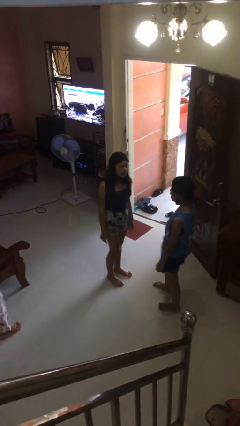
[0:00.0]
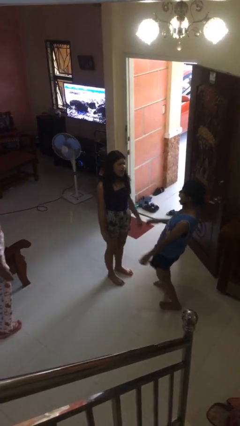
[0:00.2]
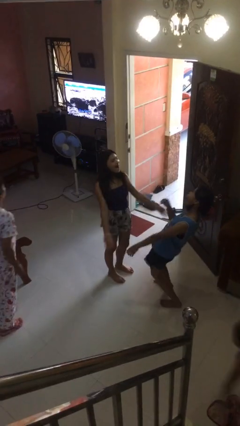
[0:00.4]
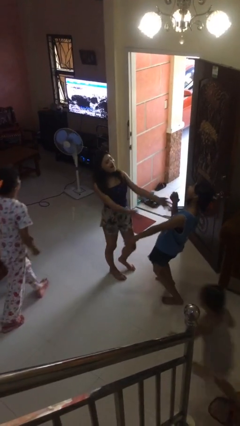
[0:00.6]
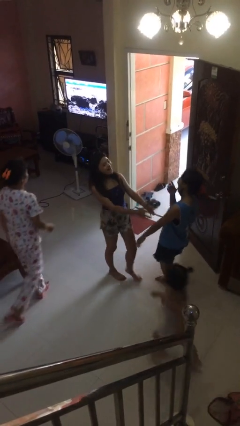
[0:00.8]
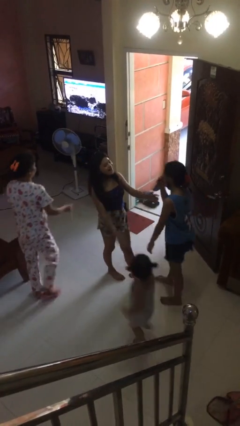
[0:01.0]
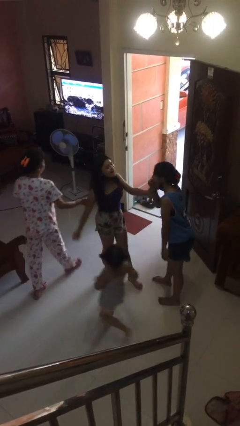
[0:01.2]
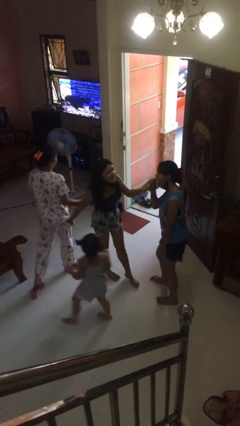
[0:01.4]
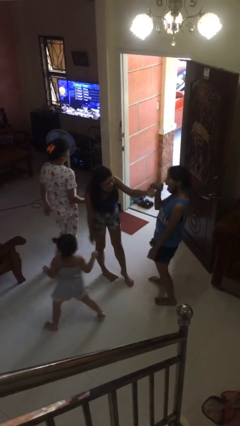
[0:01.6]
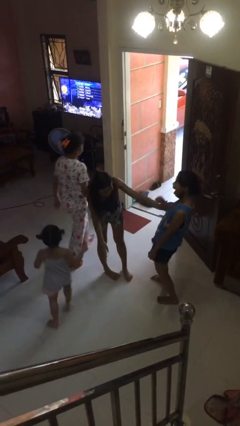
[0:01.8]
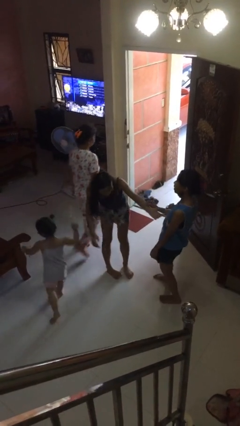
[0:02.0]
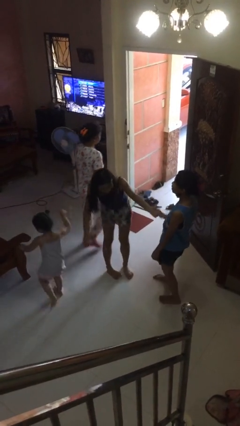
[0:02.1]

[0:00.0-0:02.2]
person laughs with person

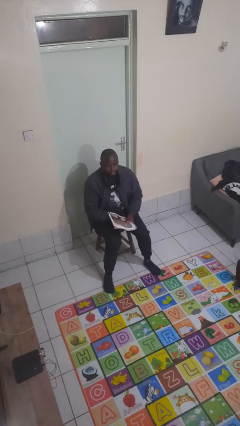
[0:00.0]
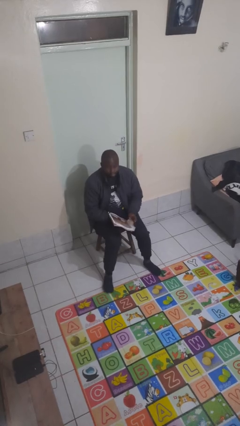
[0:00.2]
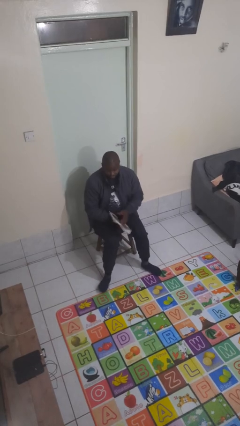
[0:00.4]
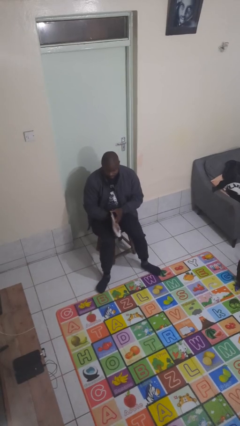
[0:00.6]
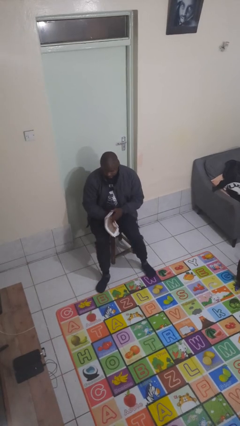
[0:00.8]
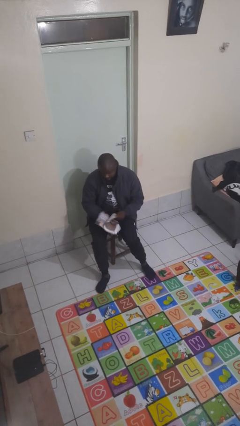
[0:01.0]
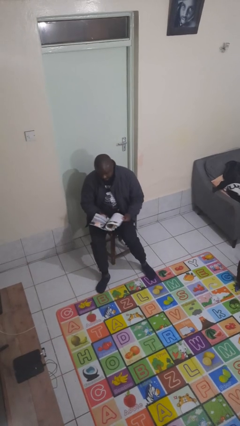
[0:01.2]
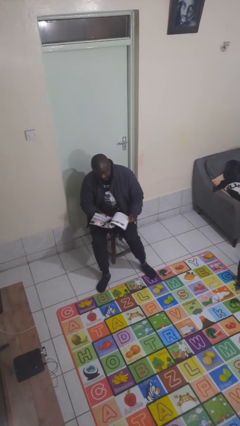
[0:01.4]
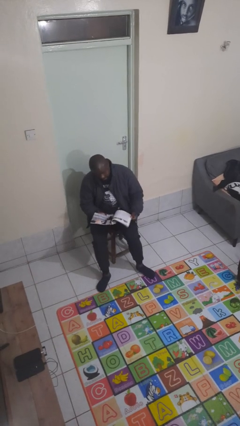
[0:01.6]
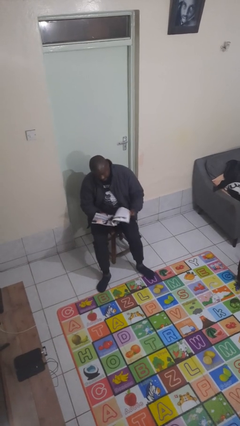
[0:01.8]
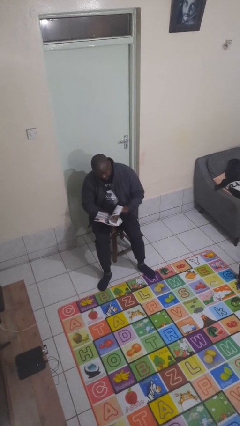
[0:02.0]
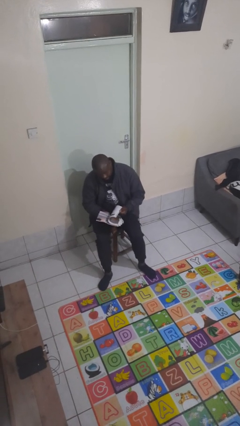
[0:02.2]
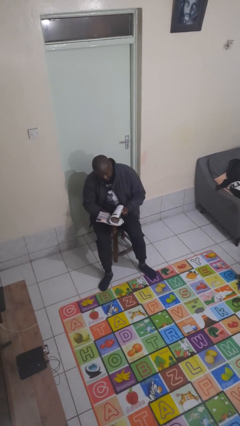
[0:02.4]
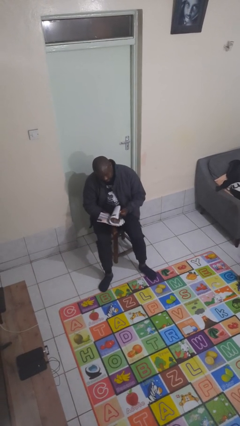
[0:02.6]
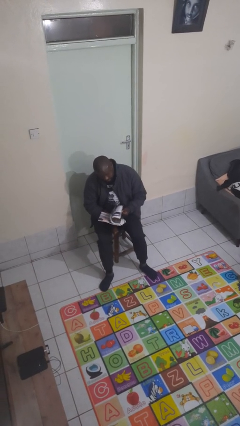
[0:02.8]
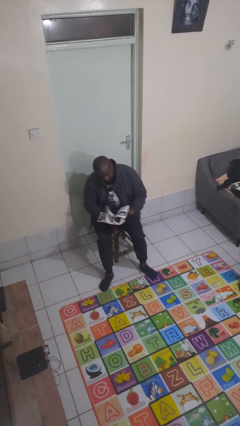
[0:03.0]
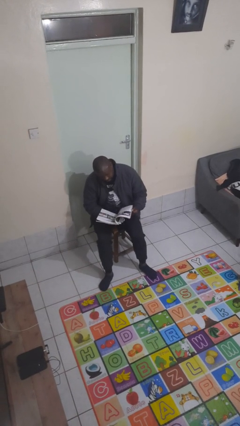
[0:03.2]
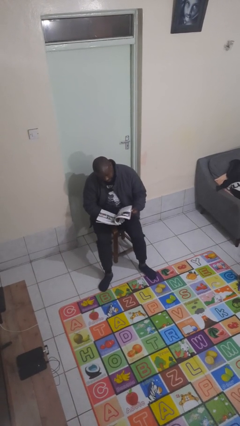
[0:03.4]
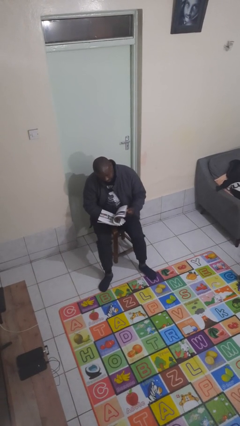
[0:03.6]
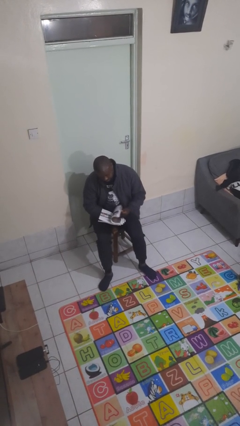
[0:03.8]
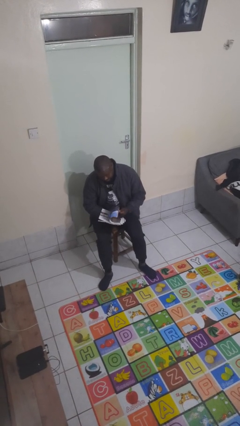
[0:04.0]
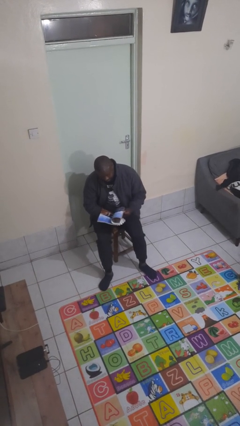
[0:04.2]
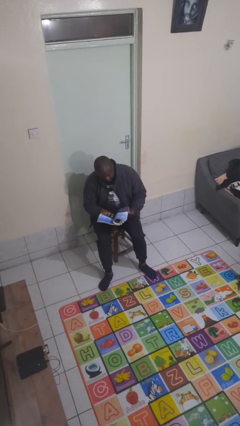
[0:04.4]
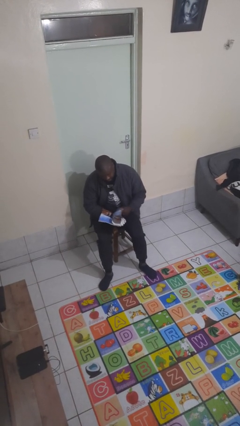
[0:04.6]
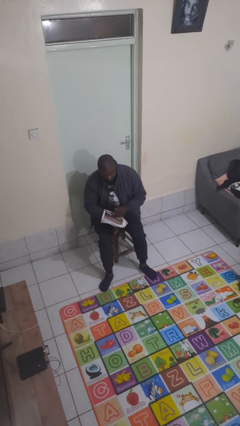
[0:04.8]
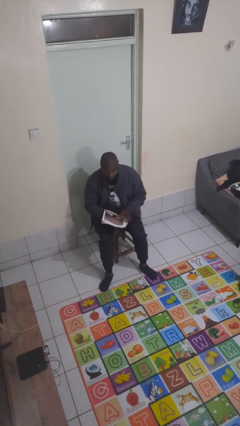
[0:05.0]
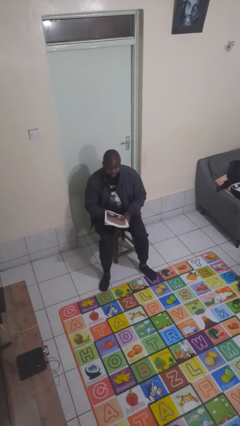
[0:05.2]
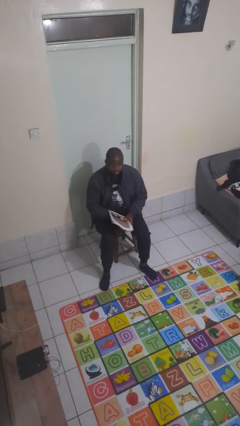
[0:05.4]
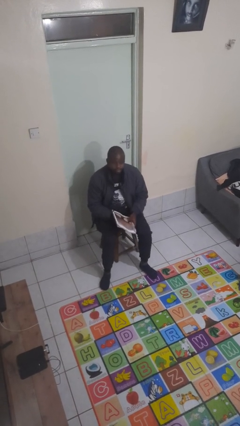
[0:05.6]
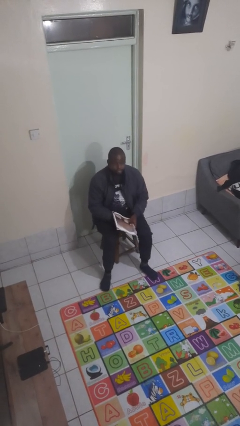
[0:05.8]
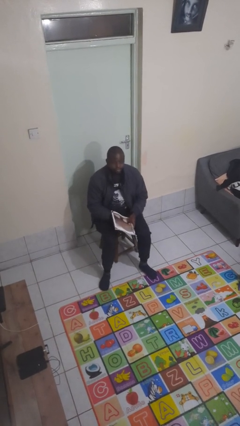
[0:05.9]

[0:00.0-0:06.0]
person reads magazine

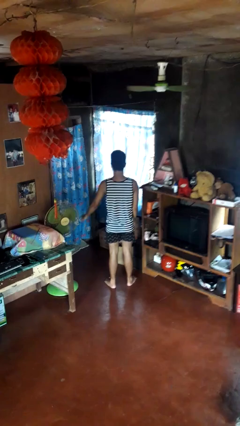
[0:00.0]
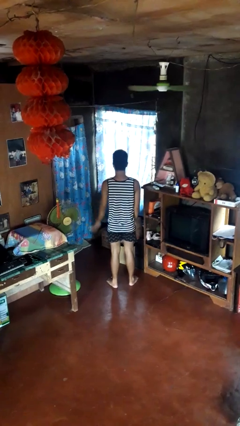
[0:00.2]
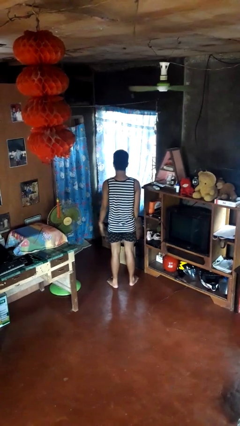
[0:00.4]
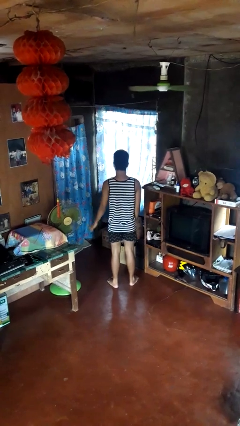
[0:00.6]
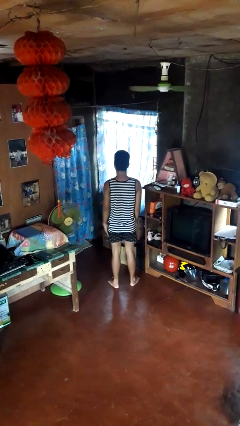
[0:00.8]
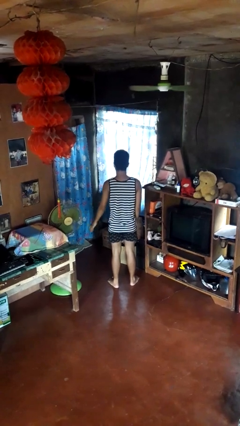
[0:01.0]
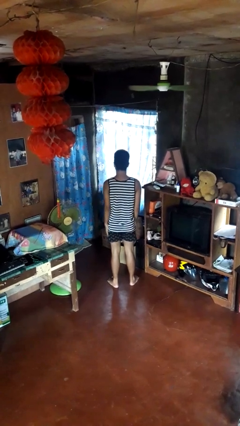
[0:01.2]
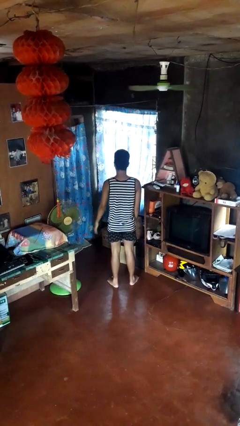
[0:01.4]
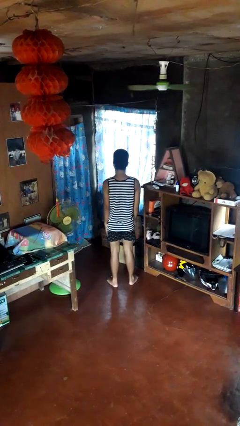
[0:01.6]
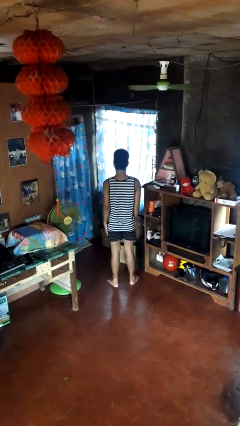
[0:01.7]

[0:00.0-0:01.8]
person slaps hands on thighs

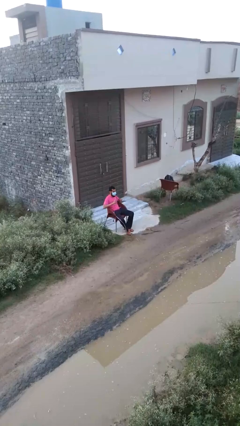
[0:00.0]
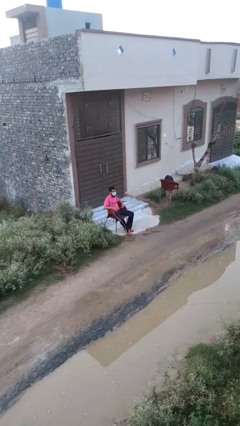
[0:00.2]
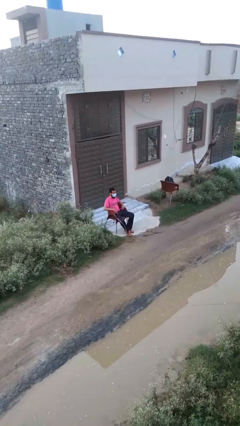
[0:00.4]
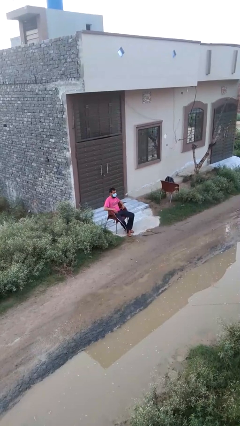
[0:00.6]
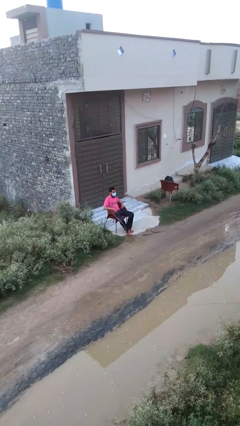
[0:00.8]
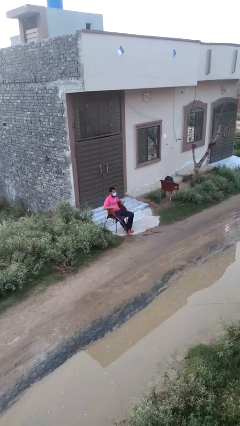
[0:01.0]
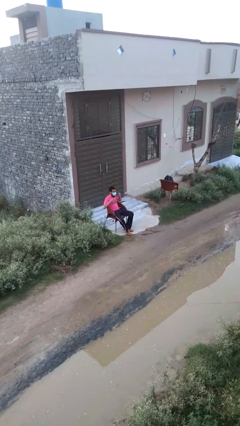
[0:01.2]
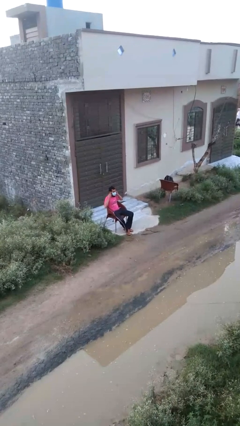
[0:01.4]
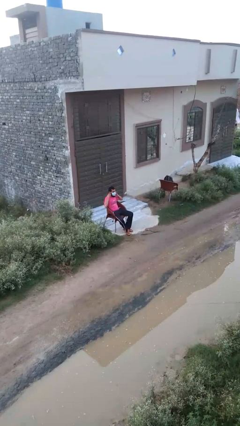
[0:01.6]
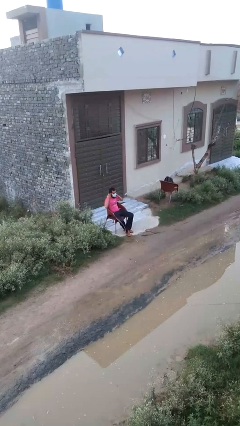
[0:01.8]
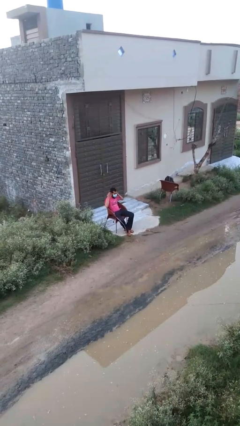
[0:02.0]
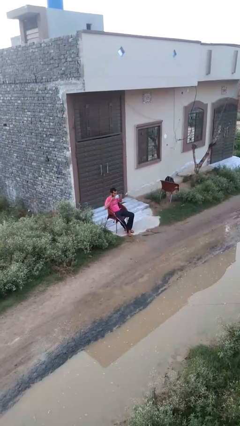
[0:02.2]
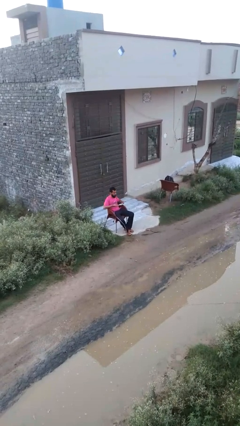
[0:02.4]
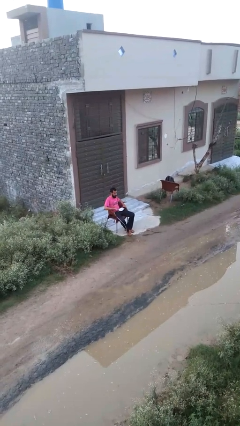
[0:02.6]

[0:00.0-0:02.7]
person takes off facemask

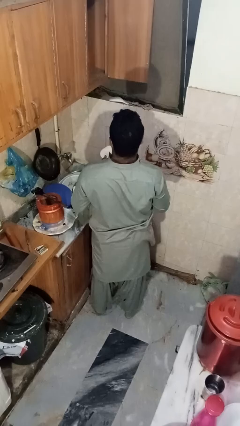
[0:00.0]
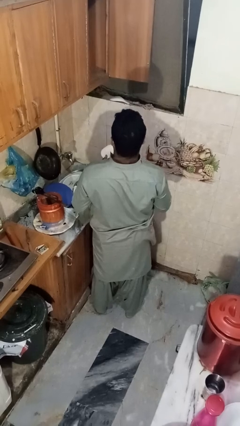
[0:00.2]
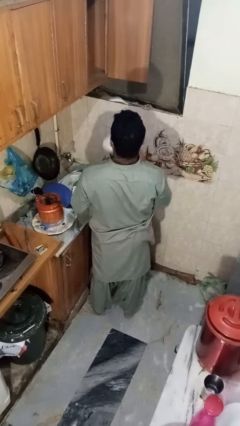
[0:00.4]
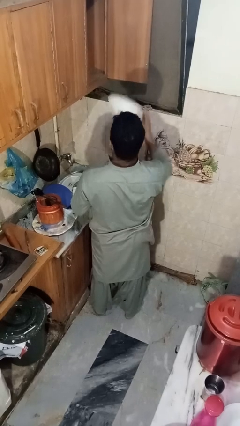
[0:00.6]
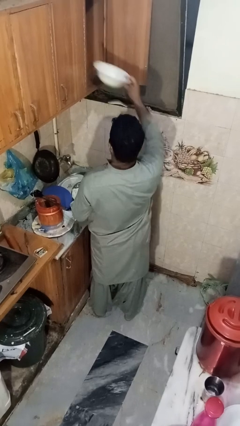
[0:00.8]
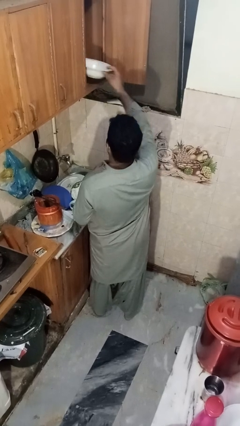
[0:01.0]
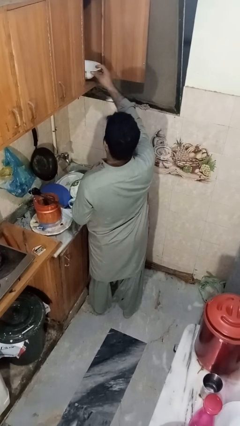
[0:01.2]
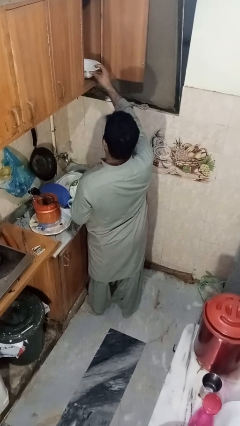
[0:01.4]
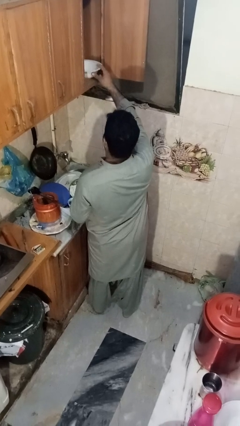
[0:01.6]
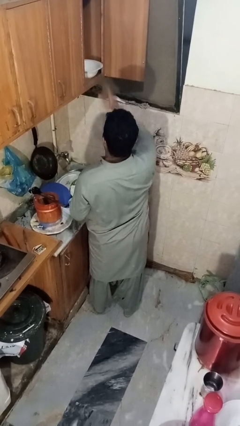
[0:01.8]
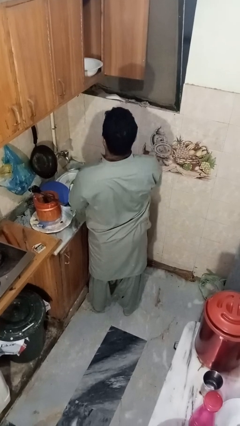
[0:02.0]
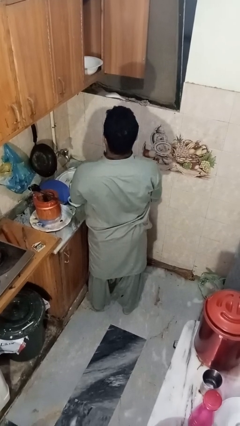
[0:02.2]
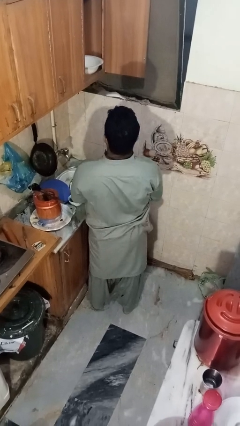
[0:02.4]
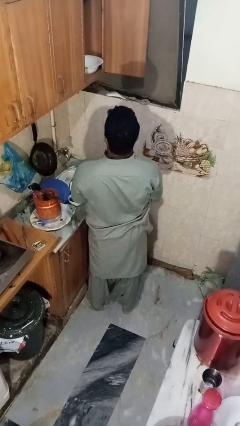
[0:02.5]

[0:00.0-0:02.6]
person puts object in cabinet

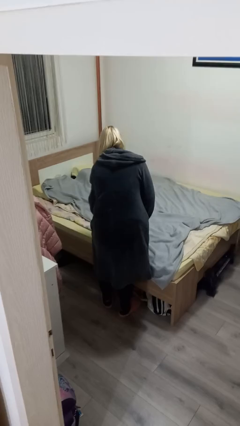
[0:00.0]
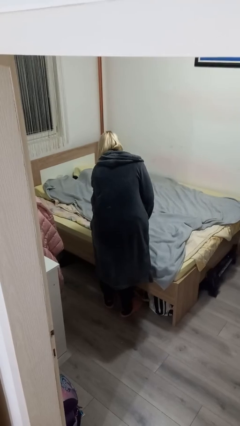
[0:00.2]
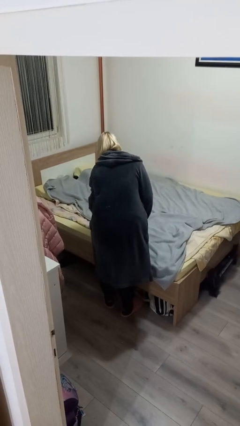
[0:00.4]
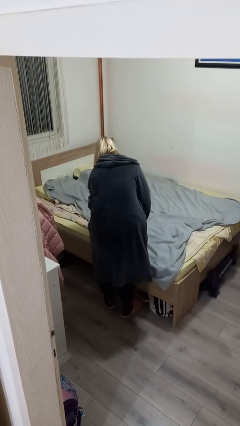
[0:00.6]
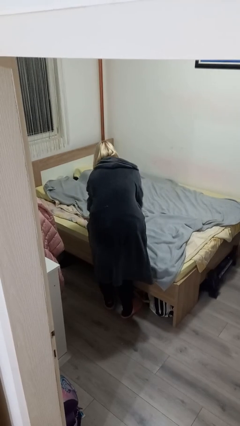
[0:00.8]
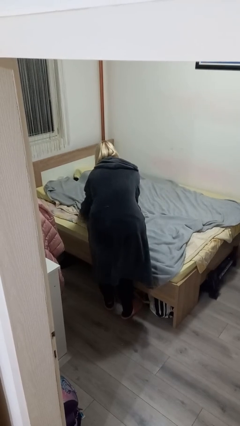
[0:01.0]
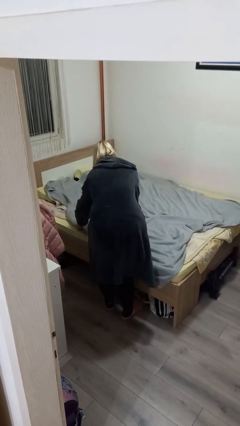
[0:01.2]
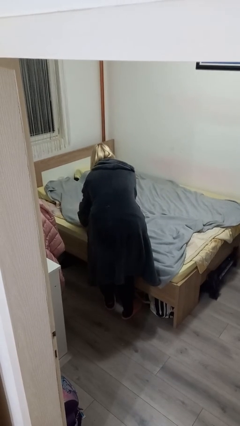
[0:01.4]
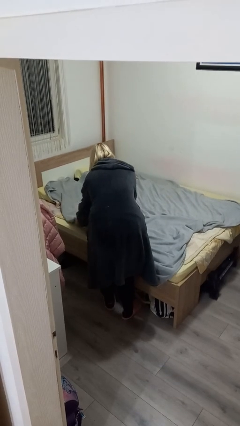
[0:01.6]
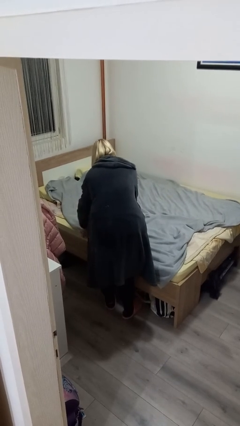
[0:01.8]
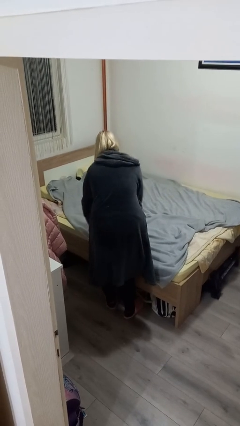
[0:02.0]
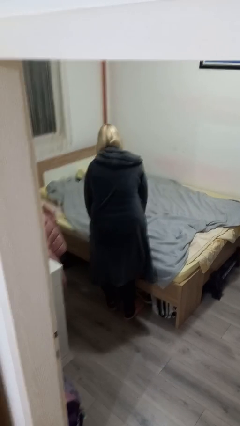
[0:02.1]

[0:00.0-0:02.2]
person makes bed
